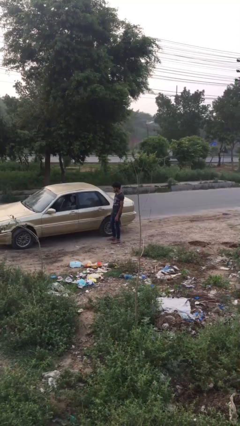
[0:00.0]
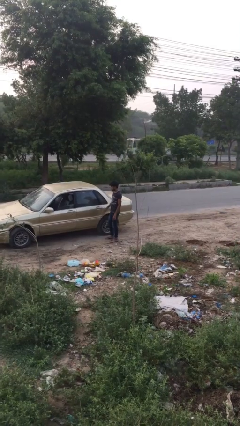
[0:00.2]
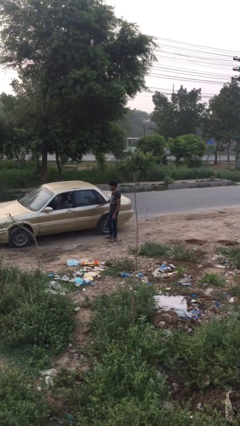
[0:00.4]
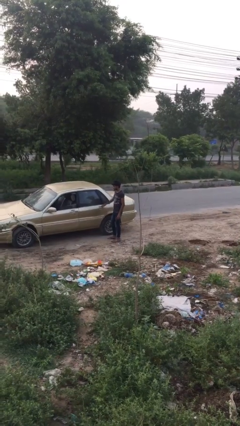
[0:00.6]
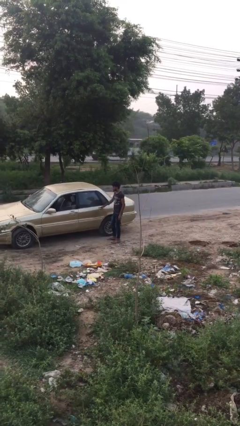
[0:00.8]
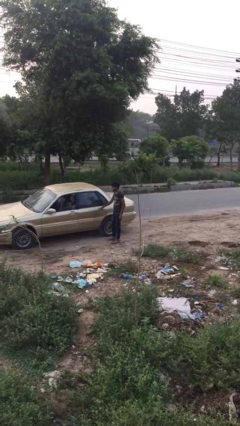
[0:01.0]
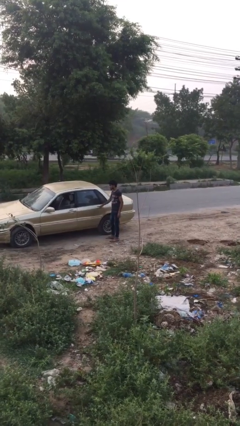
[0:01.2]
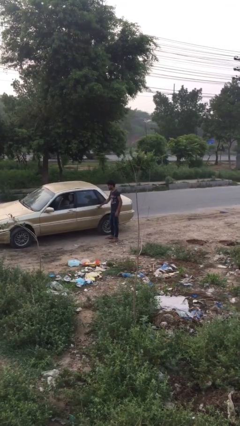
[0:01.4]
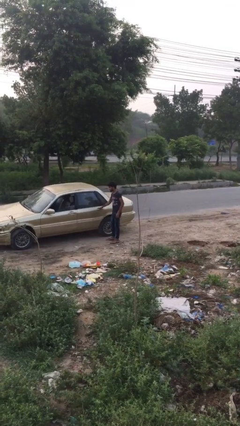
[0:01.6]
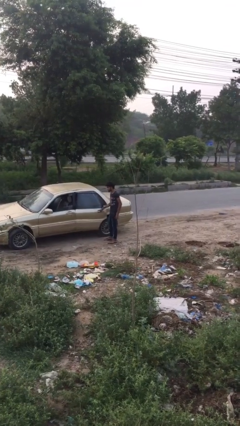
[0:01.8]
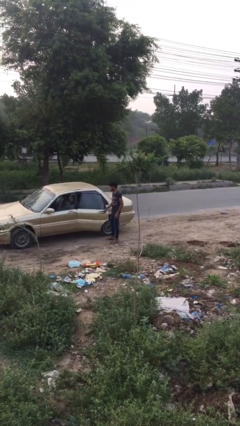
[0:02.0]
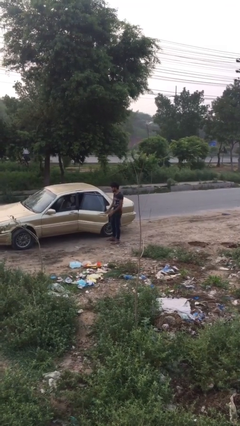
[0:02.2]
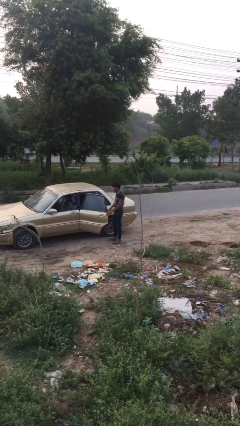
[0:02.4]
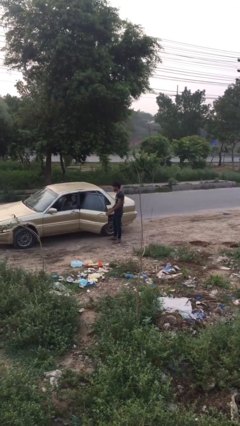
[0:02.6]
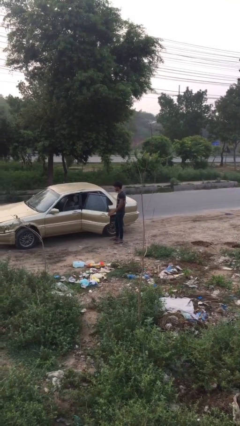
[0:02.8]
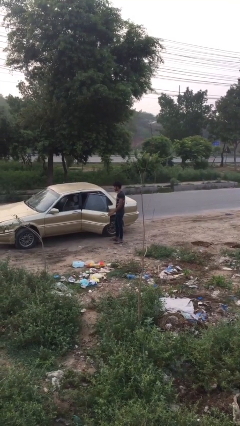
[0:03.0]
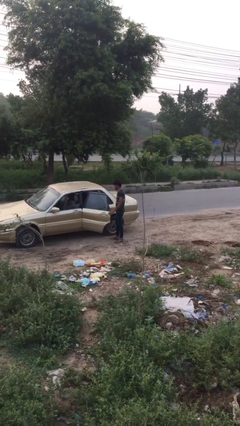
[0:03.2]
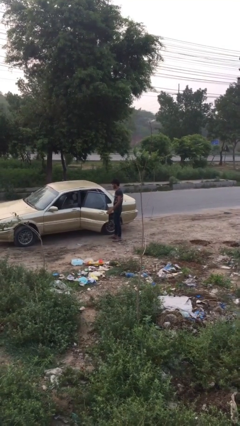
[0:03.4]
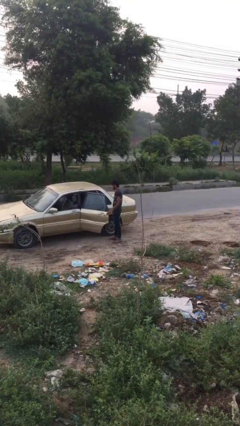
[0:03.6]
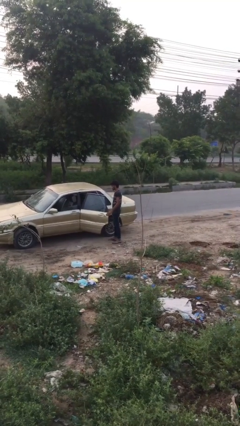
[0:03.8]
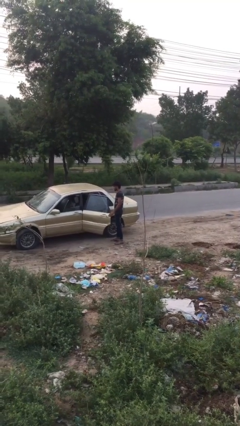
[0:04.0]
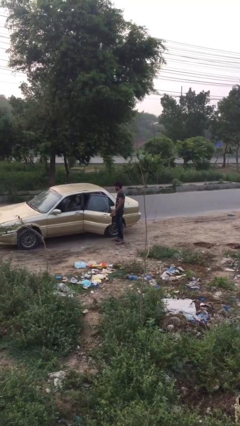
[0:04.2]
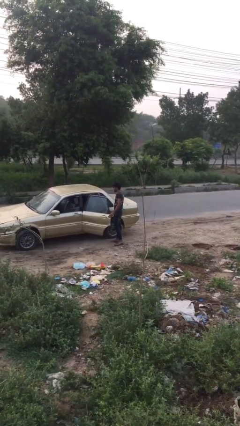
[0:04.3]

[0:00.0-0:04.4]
person opens car door

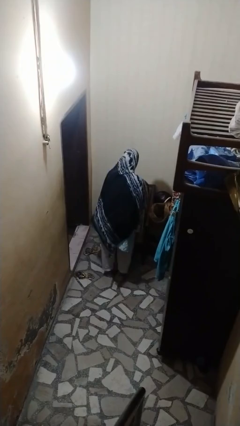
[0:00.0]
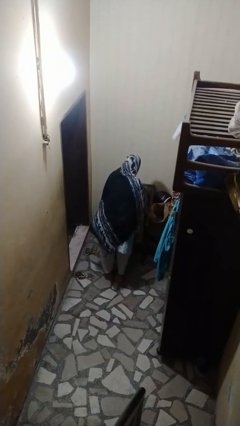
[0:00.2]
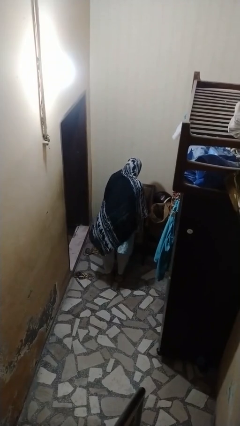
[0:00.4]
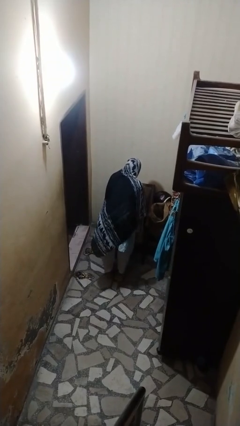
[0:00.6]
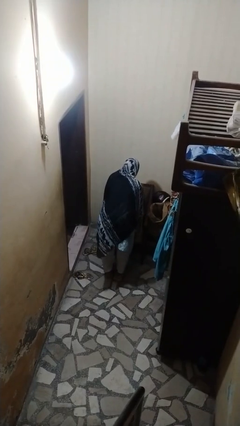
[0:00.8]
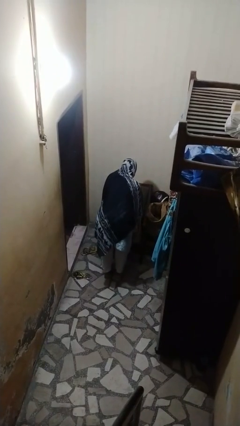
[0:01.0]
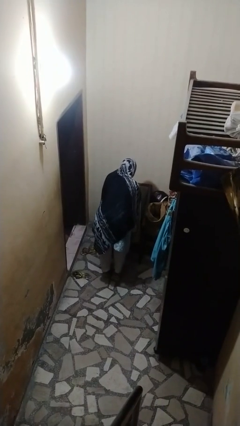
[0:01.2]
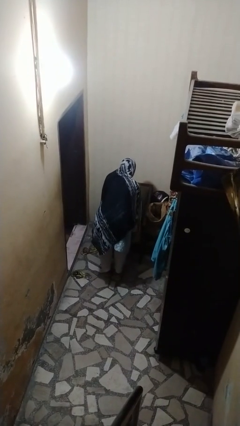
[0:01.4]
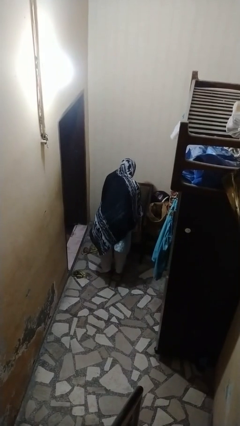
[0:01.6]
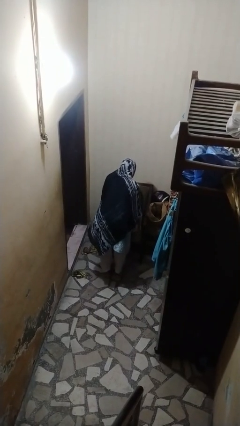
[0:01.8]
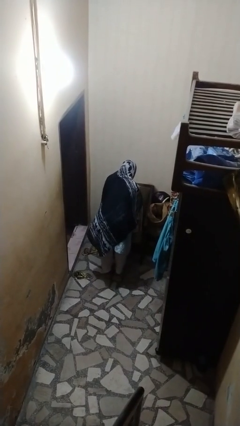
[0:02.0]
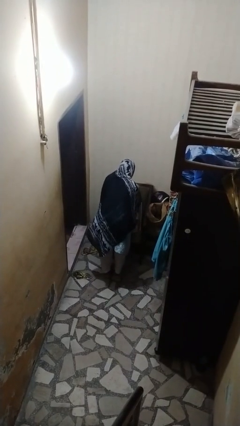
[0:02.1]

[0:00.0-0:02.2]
person searches in box

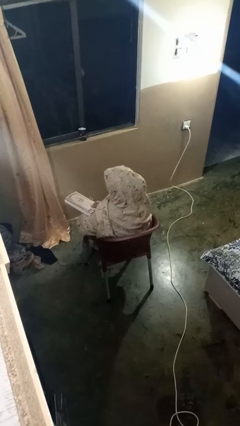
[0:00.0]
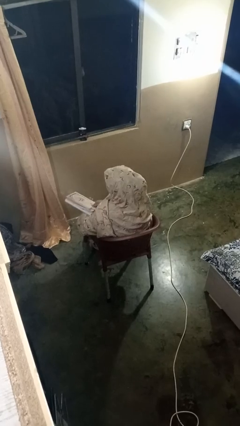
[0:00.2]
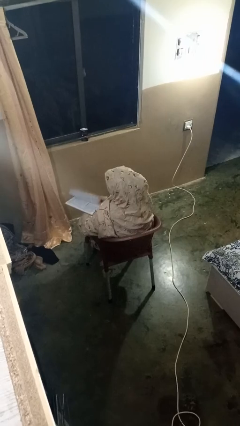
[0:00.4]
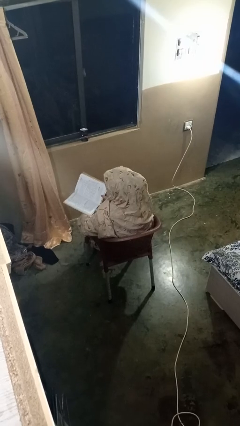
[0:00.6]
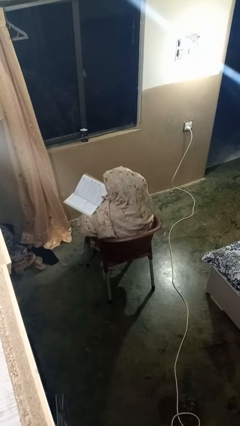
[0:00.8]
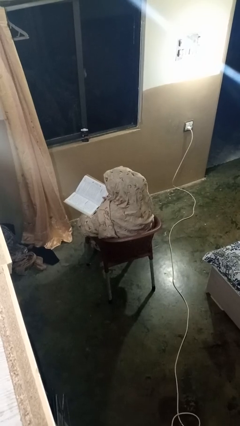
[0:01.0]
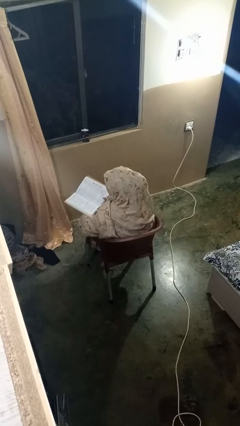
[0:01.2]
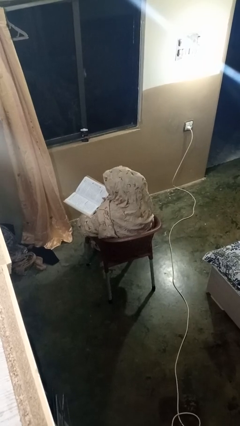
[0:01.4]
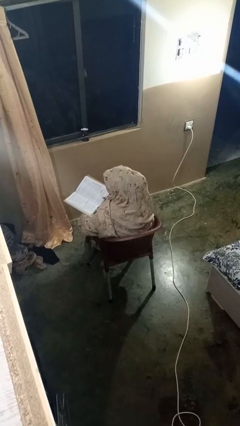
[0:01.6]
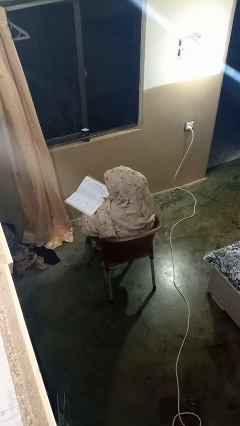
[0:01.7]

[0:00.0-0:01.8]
person reads book

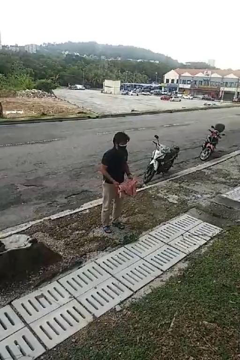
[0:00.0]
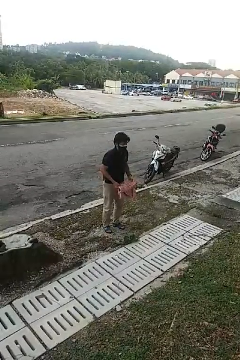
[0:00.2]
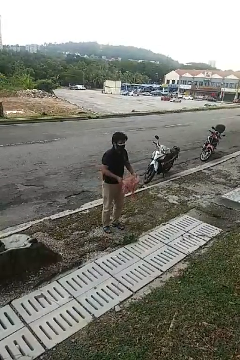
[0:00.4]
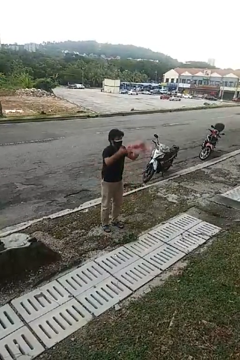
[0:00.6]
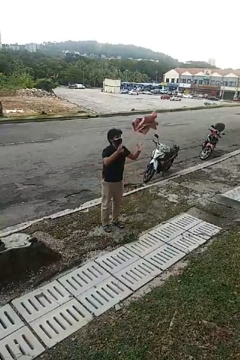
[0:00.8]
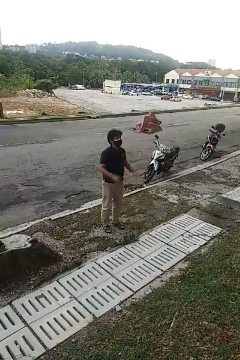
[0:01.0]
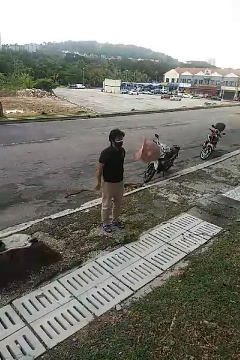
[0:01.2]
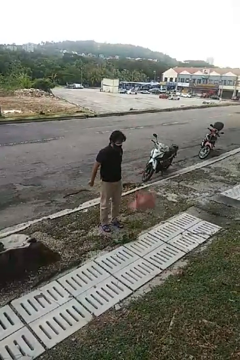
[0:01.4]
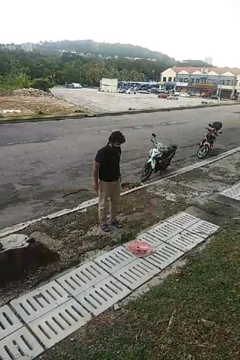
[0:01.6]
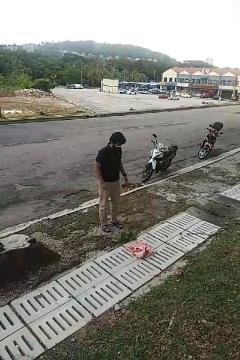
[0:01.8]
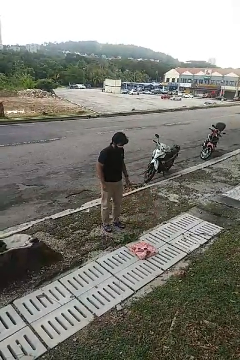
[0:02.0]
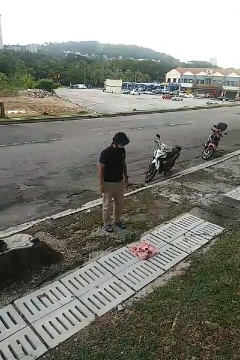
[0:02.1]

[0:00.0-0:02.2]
person throws object into air

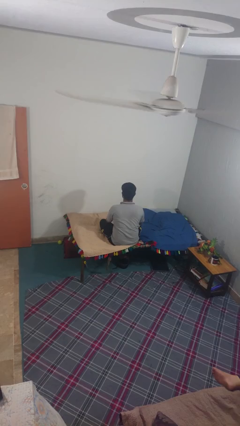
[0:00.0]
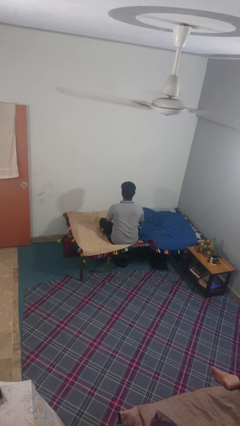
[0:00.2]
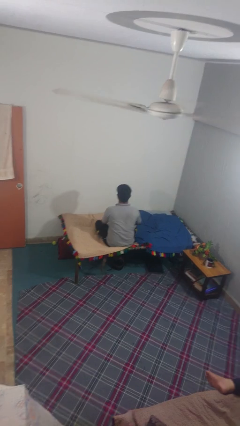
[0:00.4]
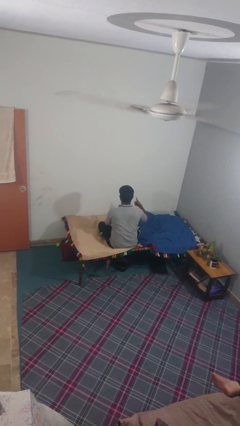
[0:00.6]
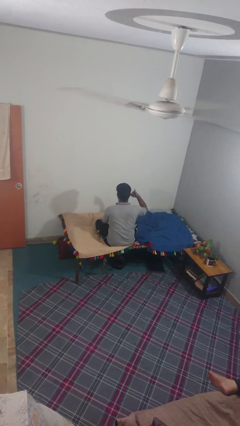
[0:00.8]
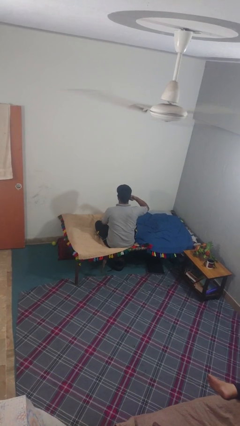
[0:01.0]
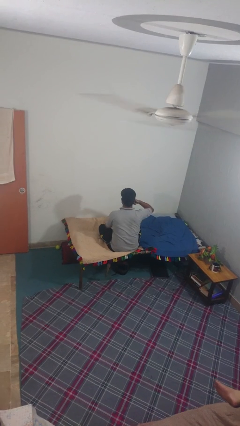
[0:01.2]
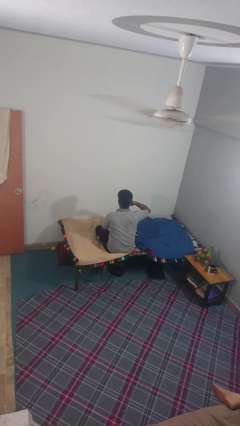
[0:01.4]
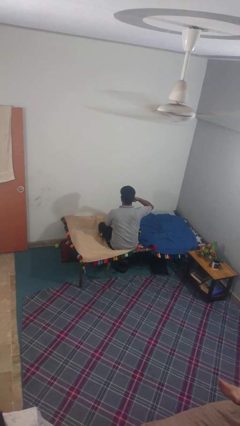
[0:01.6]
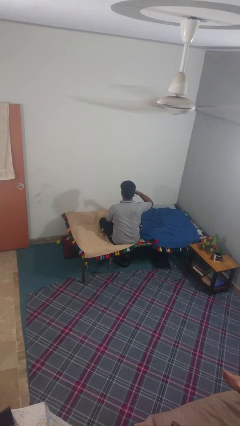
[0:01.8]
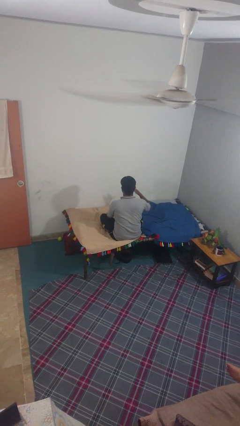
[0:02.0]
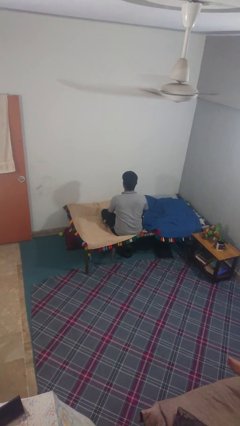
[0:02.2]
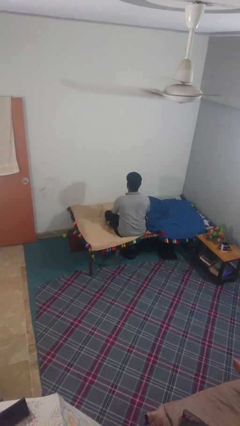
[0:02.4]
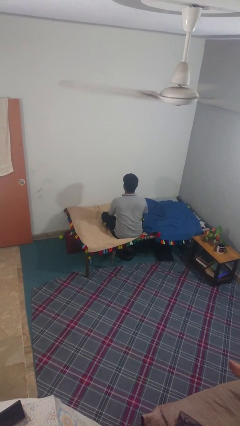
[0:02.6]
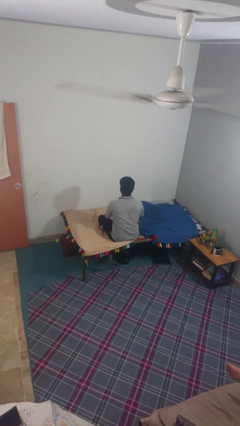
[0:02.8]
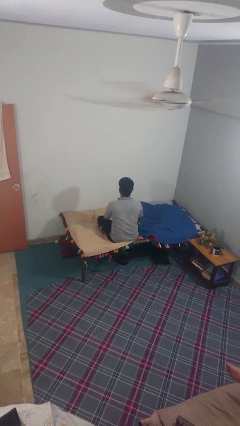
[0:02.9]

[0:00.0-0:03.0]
person gestures call me

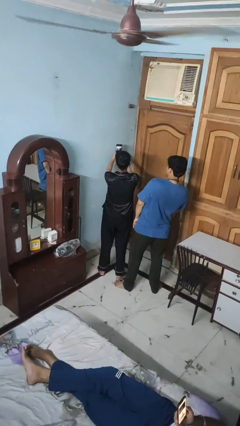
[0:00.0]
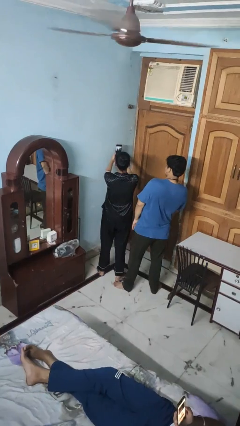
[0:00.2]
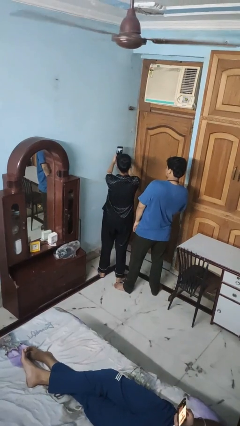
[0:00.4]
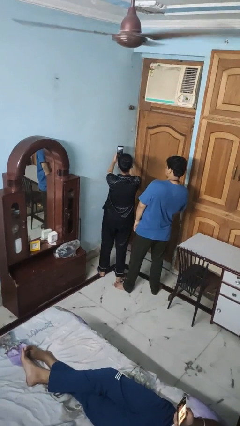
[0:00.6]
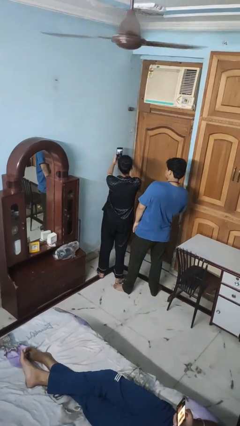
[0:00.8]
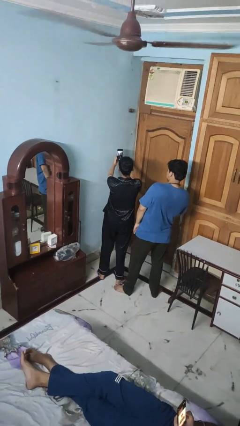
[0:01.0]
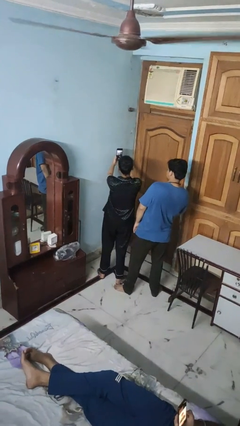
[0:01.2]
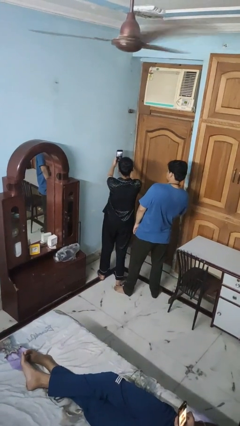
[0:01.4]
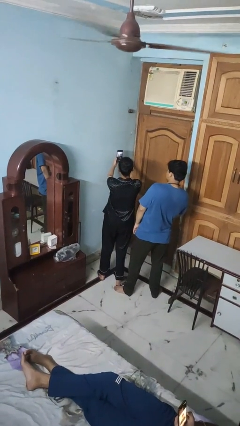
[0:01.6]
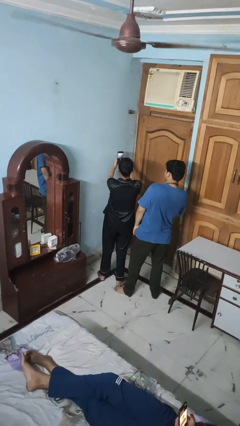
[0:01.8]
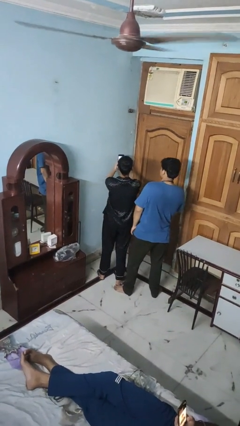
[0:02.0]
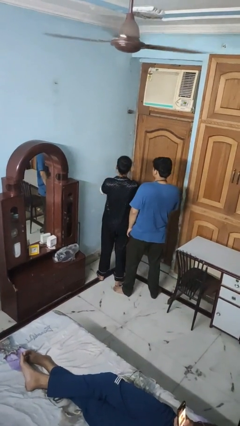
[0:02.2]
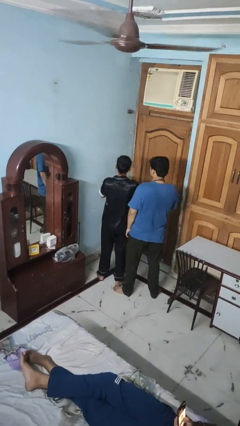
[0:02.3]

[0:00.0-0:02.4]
person takes selfie with person

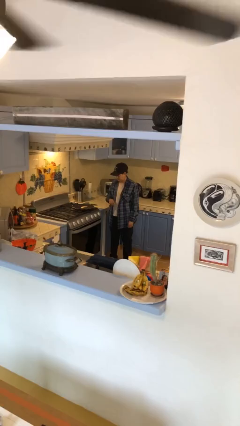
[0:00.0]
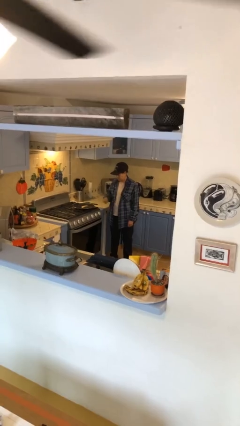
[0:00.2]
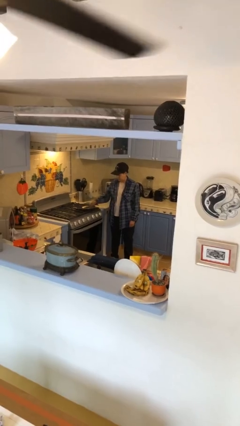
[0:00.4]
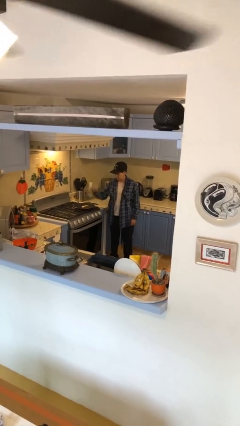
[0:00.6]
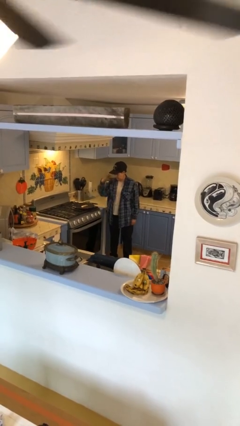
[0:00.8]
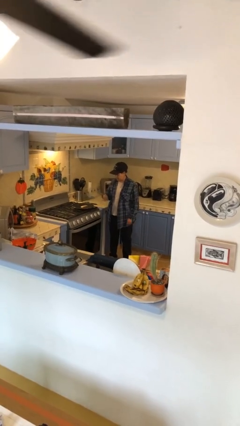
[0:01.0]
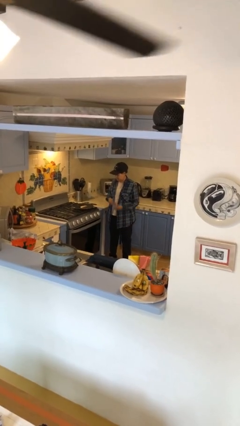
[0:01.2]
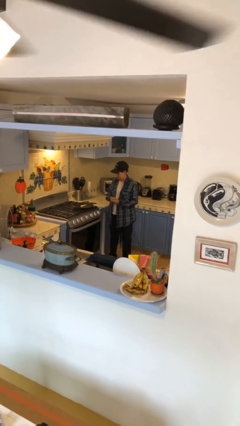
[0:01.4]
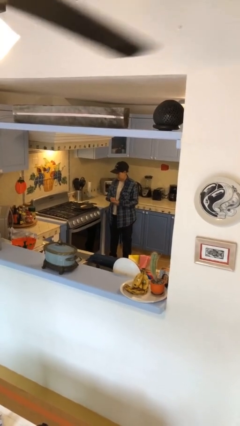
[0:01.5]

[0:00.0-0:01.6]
person burns hand
